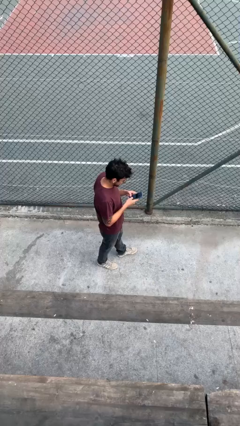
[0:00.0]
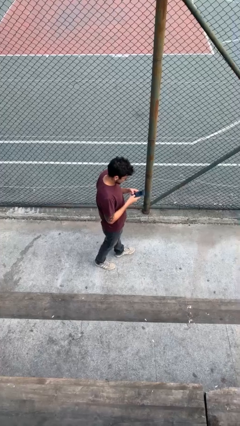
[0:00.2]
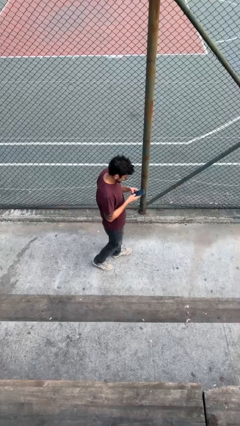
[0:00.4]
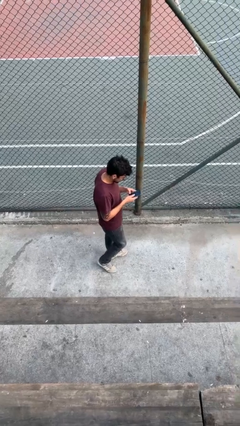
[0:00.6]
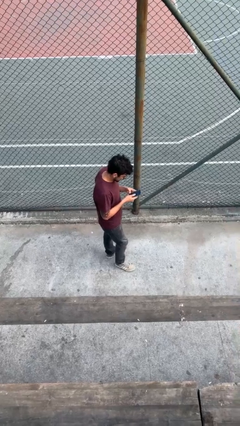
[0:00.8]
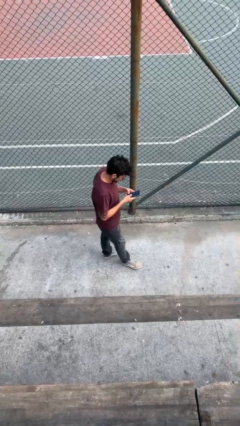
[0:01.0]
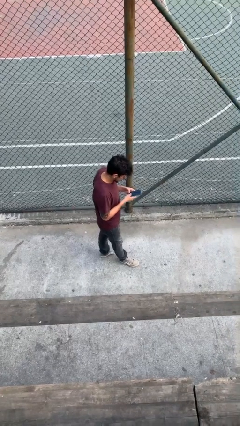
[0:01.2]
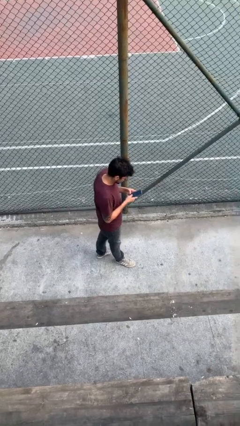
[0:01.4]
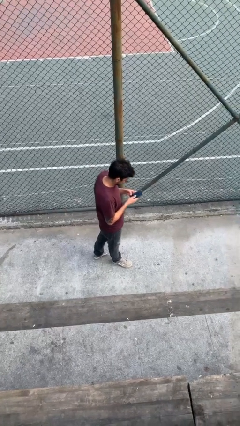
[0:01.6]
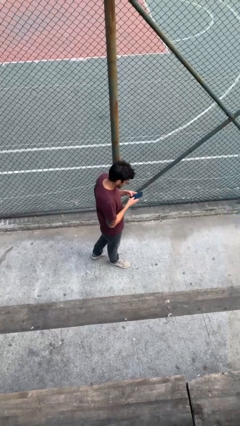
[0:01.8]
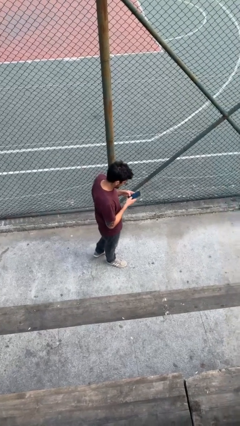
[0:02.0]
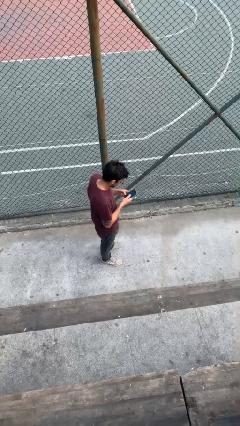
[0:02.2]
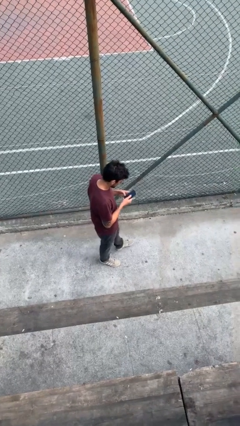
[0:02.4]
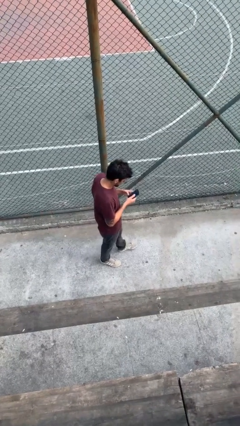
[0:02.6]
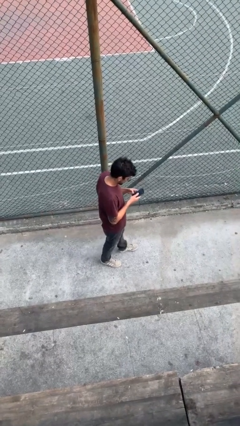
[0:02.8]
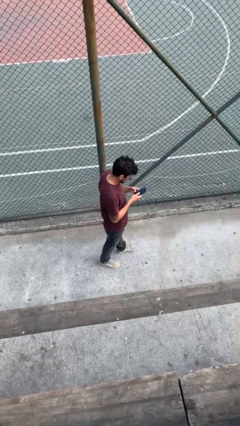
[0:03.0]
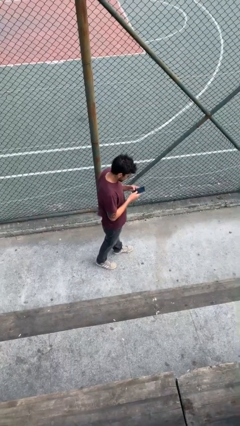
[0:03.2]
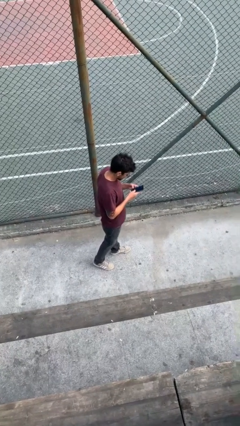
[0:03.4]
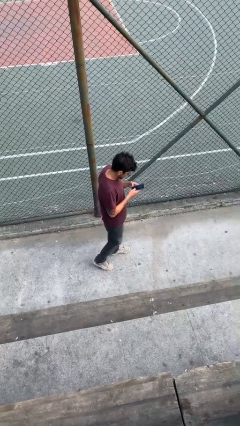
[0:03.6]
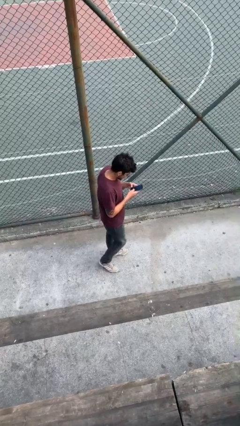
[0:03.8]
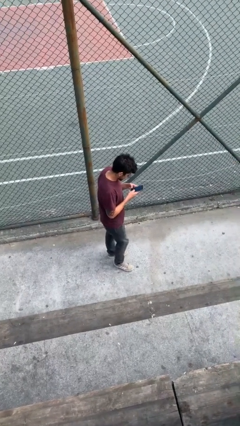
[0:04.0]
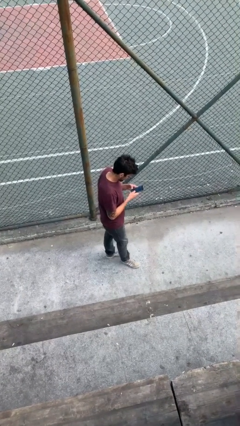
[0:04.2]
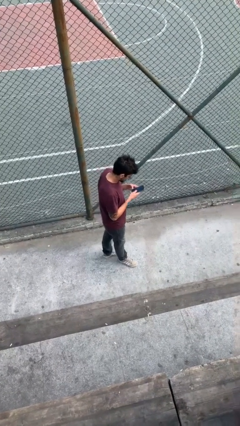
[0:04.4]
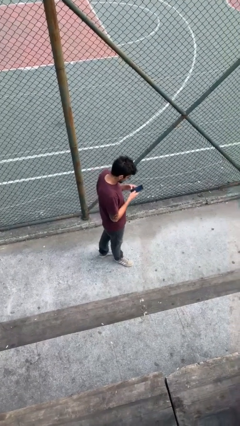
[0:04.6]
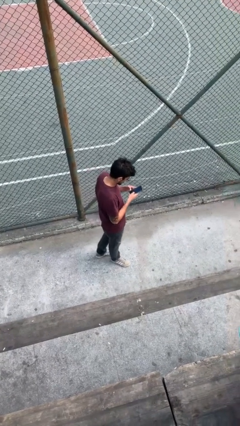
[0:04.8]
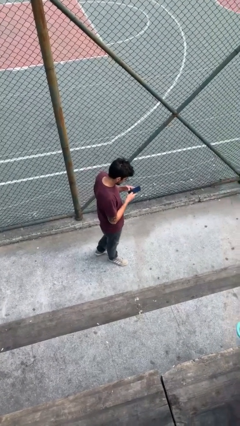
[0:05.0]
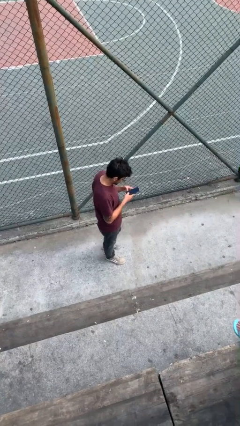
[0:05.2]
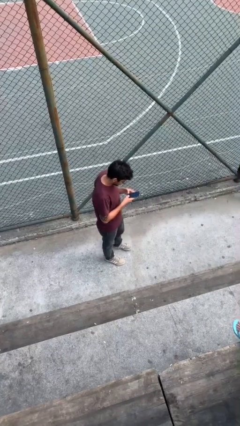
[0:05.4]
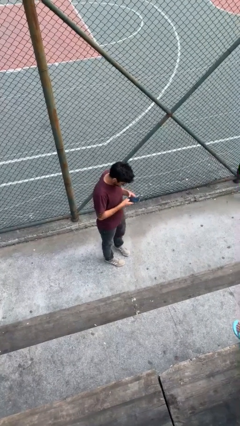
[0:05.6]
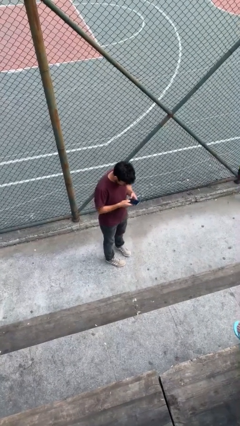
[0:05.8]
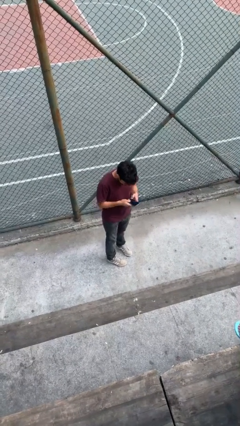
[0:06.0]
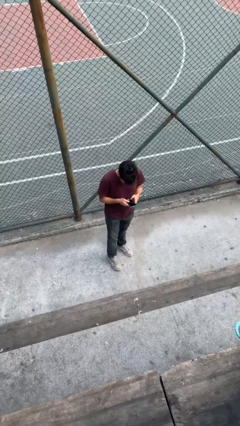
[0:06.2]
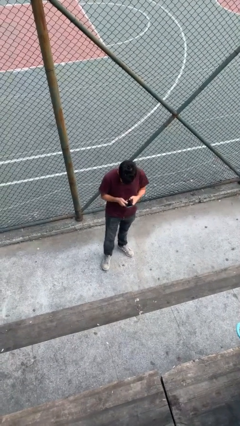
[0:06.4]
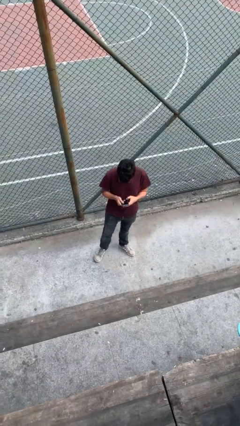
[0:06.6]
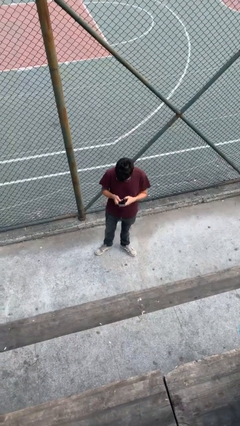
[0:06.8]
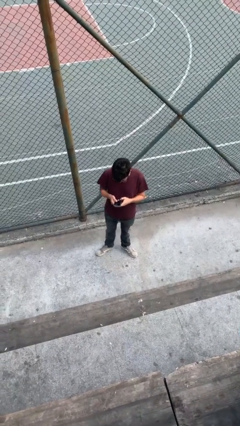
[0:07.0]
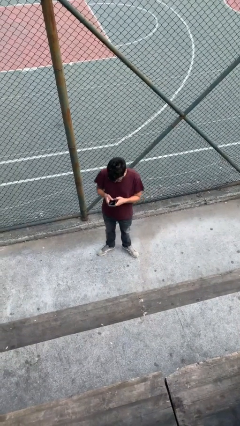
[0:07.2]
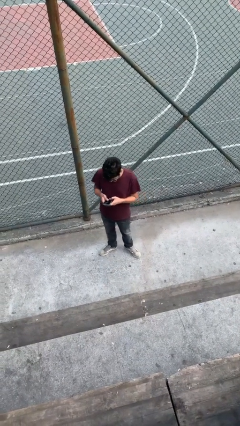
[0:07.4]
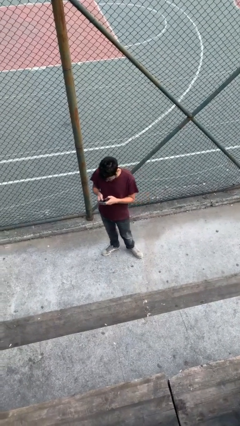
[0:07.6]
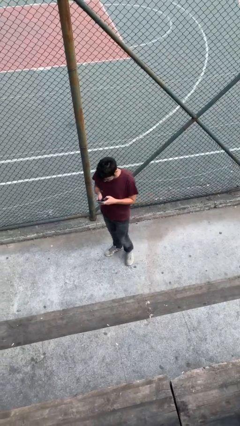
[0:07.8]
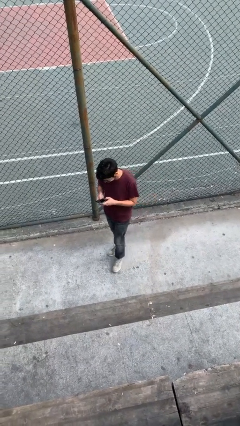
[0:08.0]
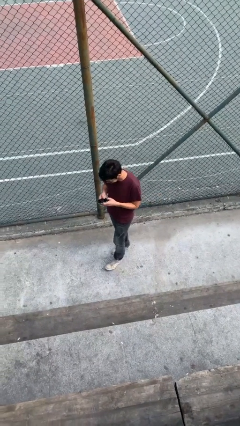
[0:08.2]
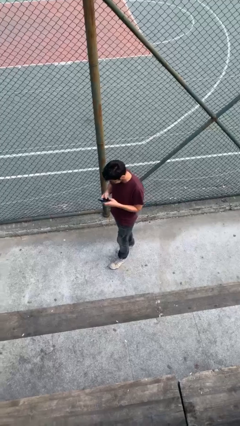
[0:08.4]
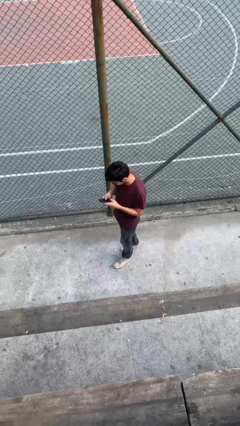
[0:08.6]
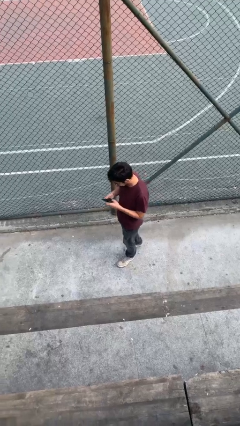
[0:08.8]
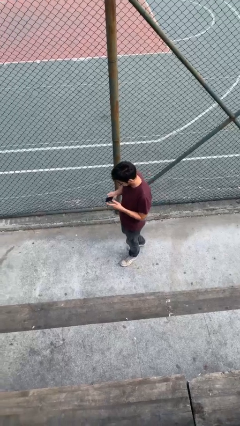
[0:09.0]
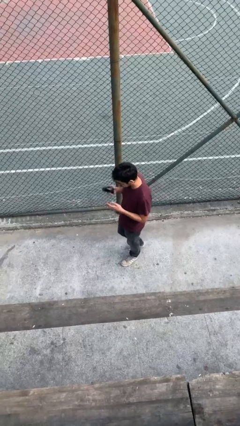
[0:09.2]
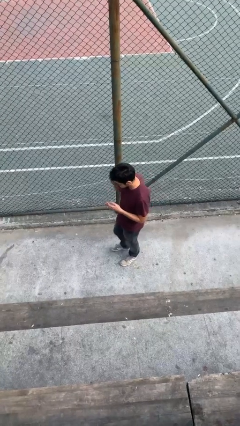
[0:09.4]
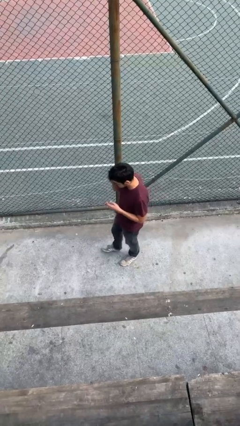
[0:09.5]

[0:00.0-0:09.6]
person texts on phone

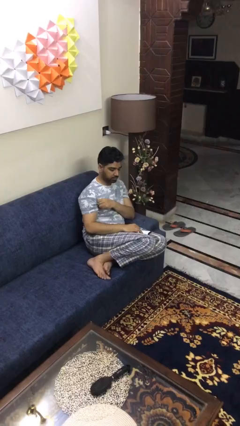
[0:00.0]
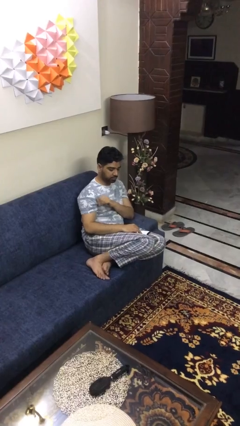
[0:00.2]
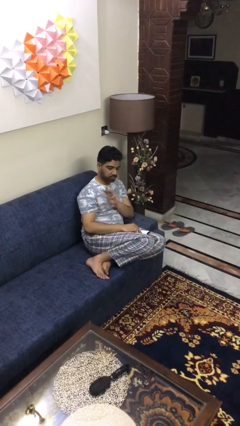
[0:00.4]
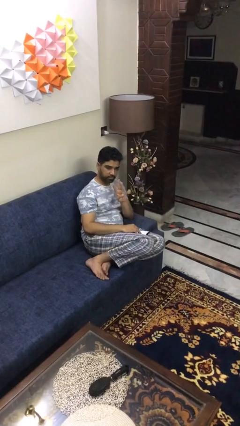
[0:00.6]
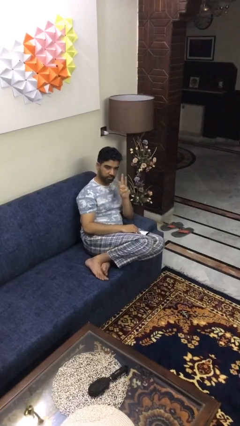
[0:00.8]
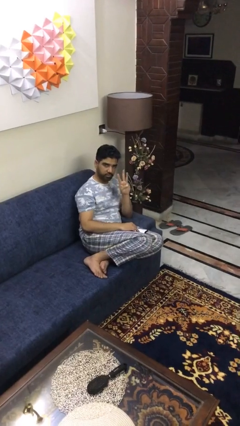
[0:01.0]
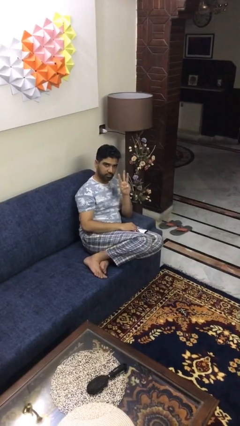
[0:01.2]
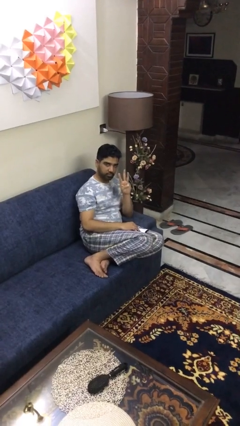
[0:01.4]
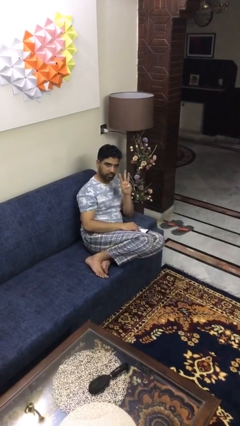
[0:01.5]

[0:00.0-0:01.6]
person gestures number three

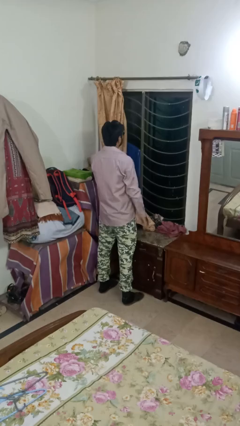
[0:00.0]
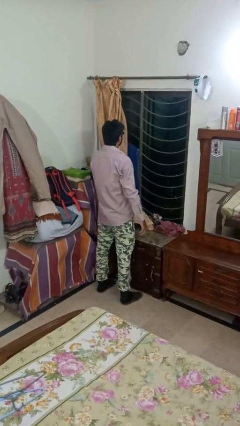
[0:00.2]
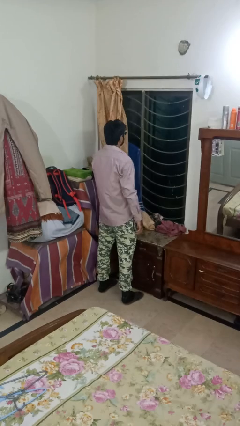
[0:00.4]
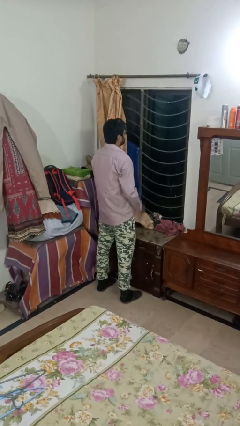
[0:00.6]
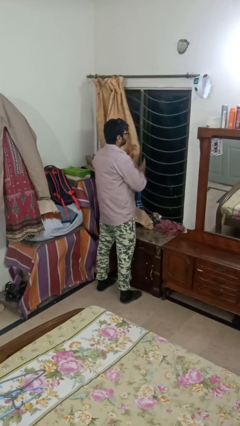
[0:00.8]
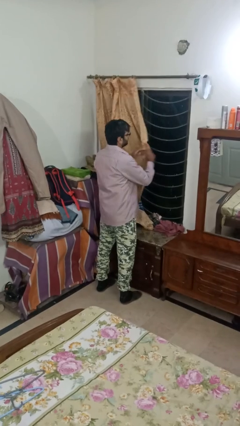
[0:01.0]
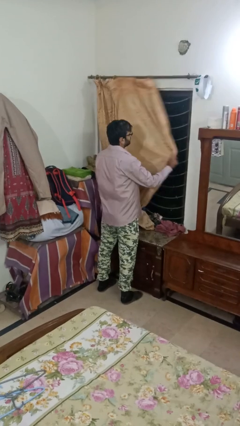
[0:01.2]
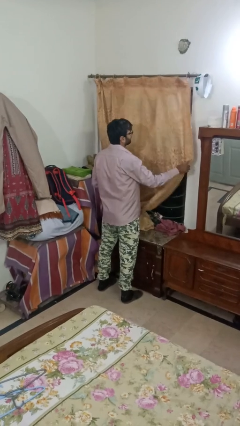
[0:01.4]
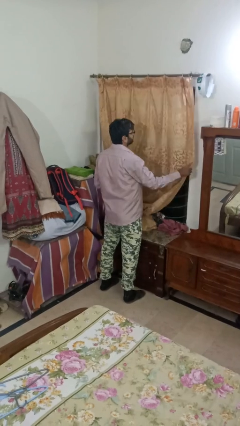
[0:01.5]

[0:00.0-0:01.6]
person closes curtains

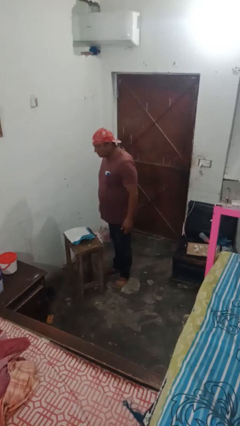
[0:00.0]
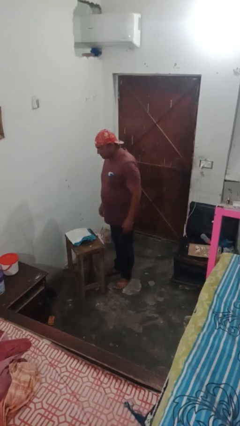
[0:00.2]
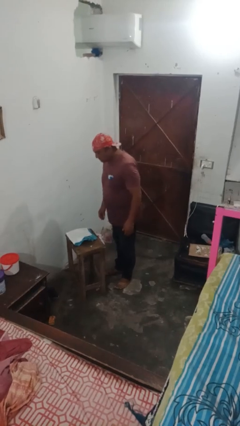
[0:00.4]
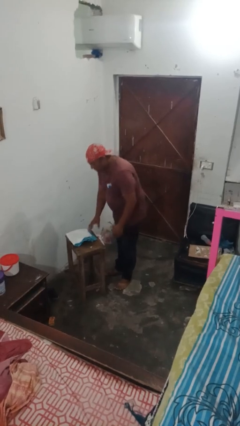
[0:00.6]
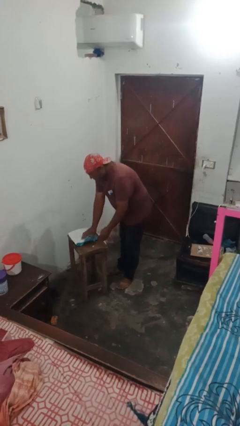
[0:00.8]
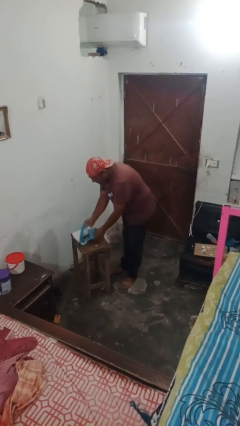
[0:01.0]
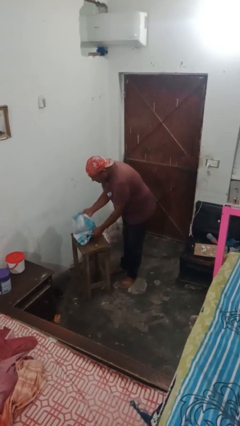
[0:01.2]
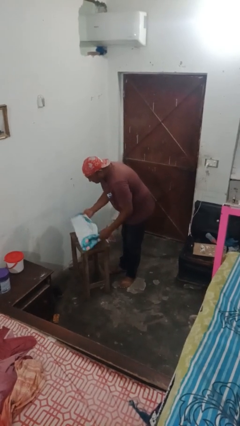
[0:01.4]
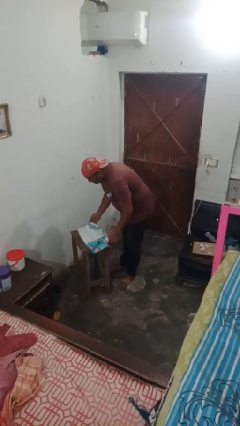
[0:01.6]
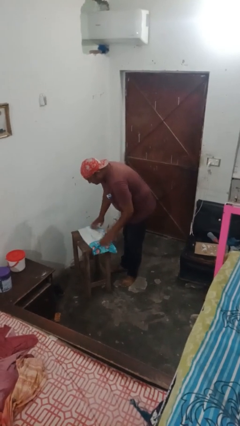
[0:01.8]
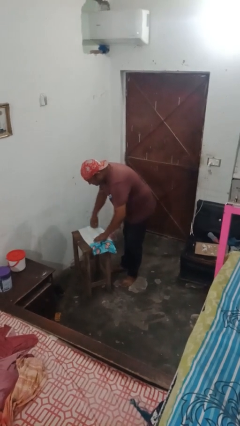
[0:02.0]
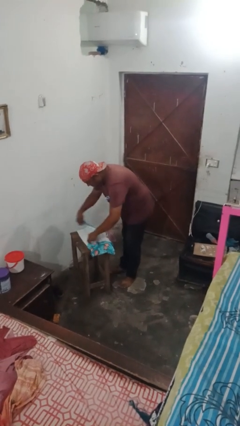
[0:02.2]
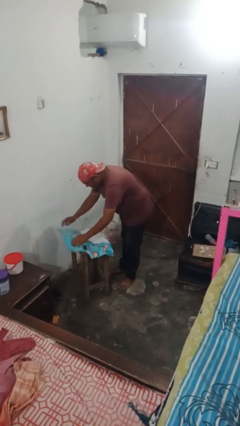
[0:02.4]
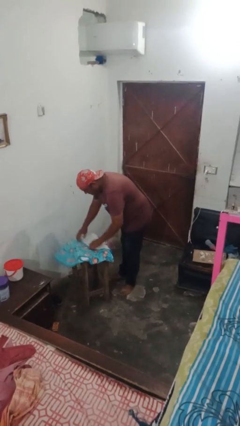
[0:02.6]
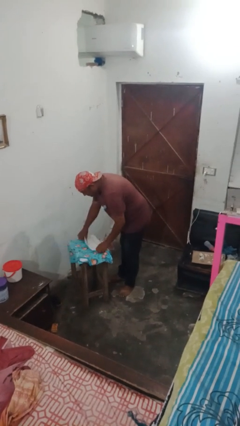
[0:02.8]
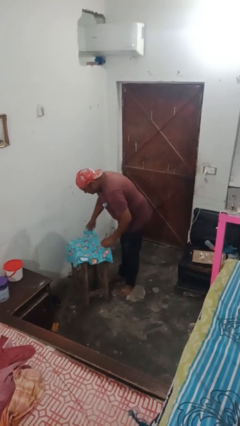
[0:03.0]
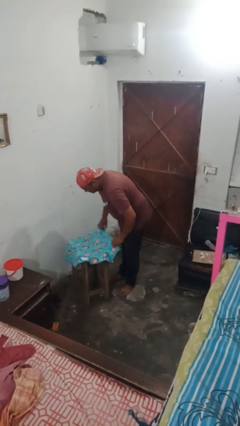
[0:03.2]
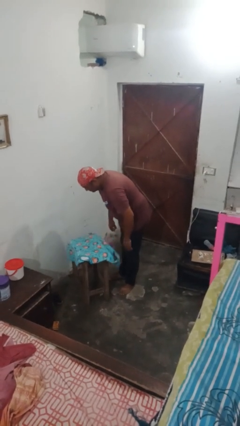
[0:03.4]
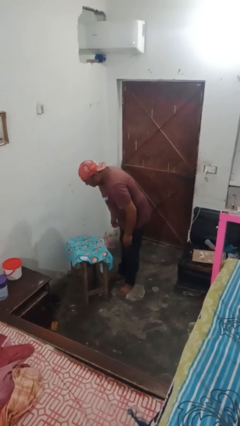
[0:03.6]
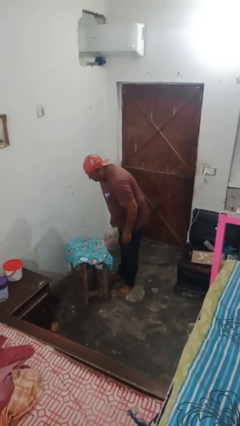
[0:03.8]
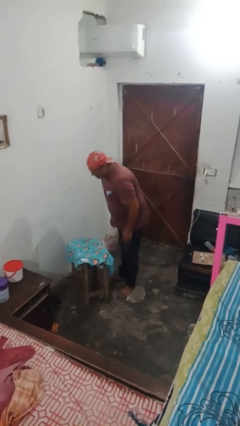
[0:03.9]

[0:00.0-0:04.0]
person folds tablecloth

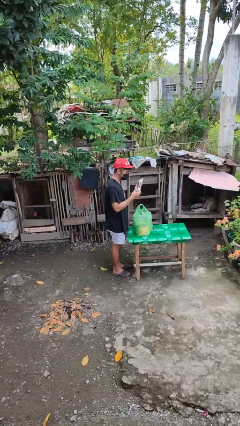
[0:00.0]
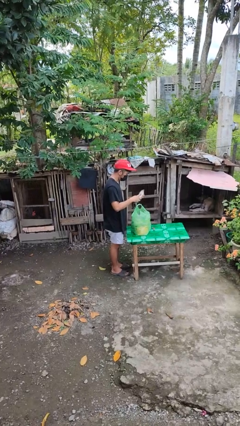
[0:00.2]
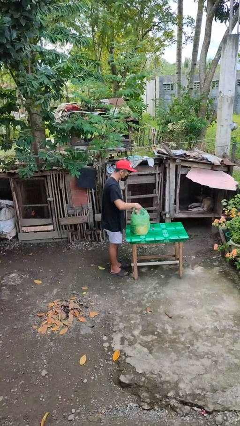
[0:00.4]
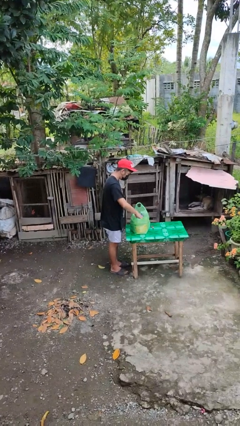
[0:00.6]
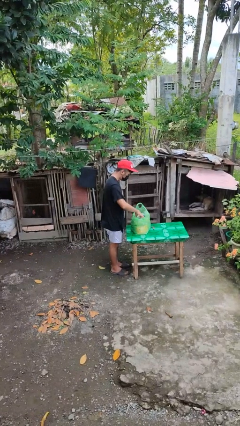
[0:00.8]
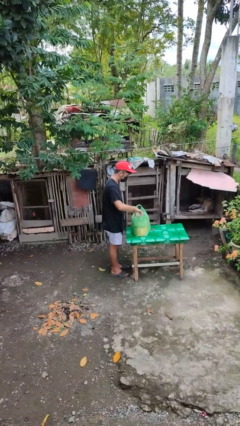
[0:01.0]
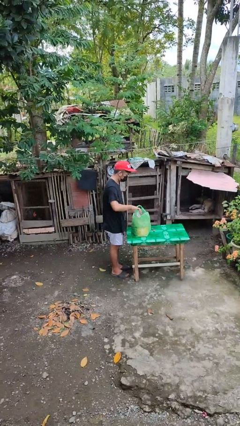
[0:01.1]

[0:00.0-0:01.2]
person puts object into bag
